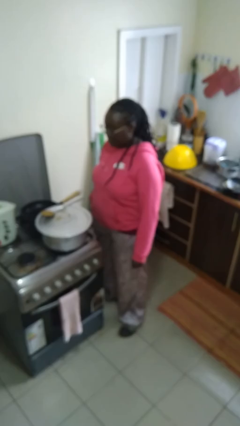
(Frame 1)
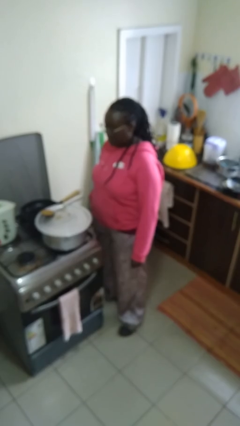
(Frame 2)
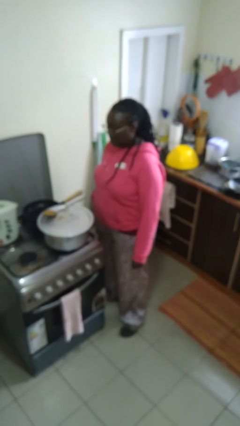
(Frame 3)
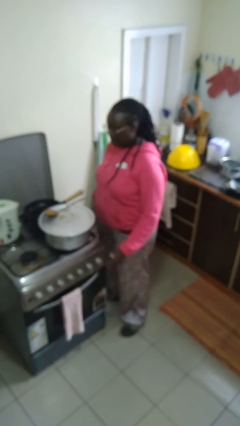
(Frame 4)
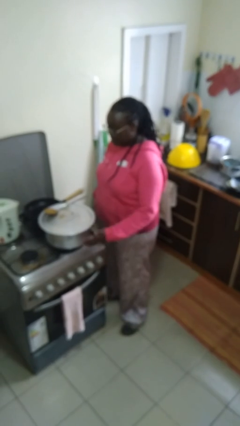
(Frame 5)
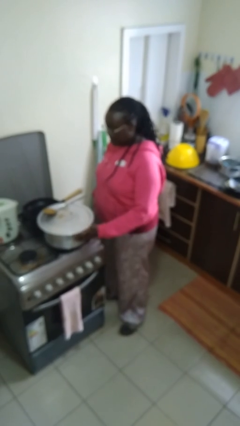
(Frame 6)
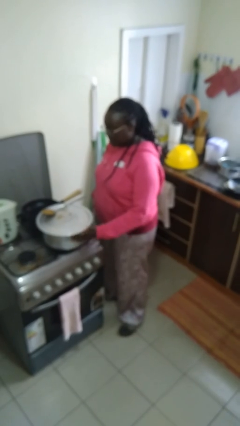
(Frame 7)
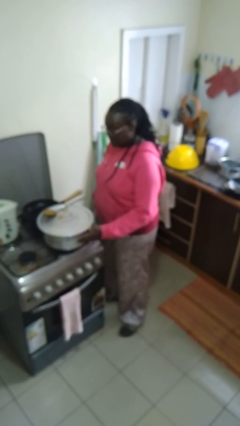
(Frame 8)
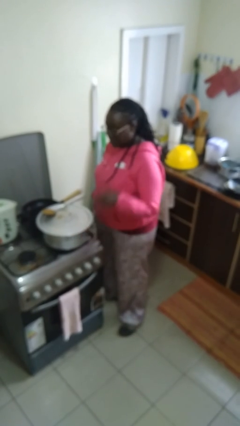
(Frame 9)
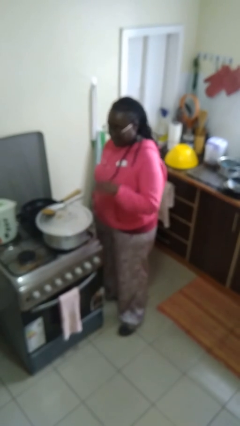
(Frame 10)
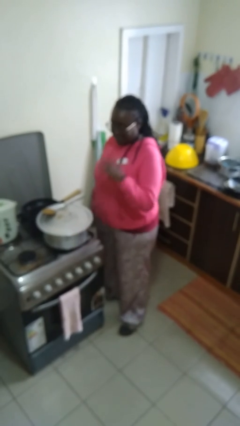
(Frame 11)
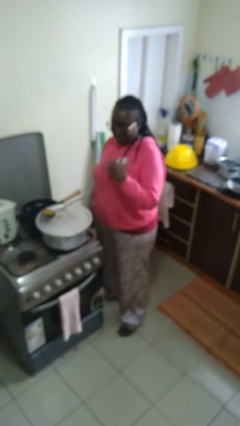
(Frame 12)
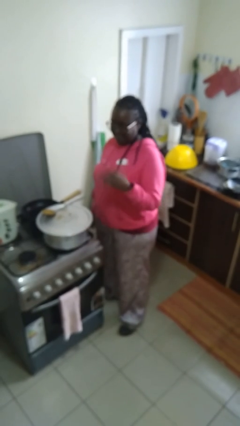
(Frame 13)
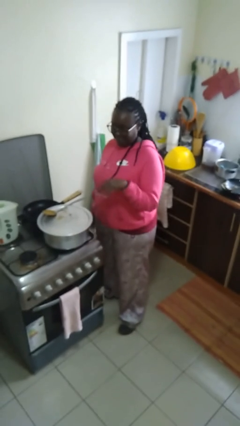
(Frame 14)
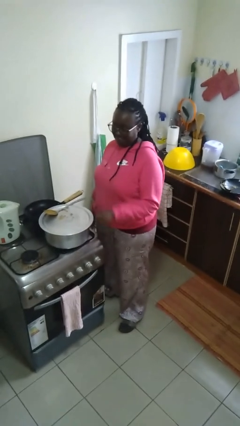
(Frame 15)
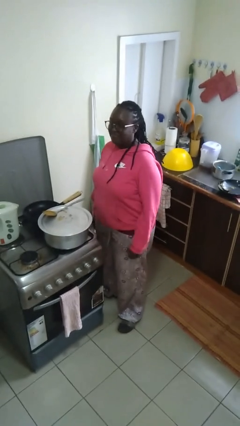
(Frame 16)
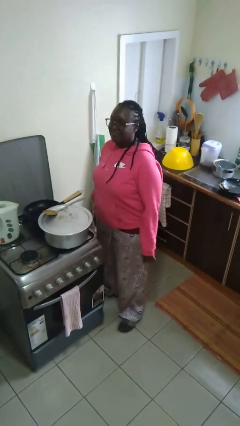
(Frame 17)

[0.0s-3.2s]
person burns hand

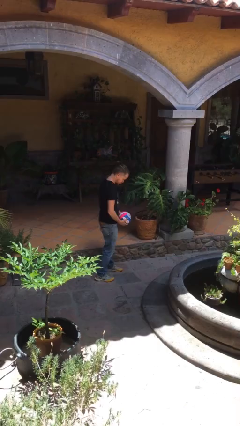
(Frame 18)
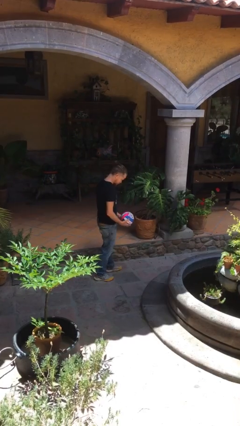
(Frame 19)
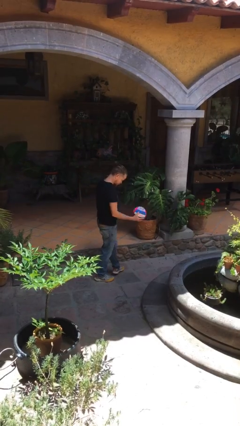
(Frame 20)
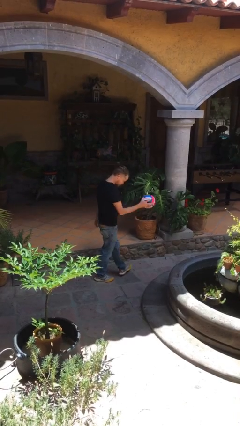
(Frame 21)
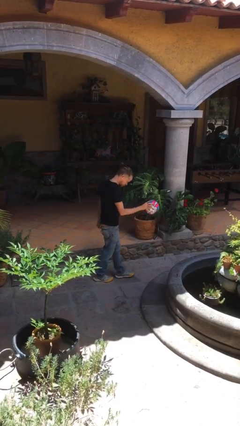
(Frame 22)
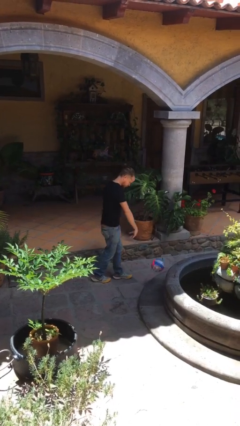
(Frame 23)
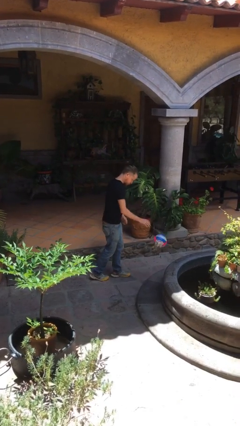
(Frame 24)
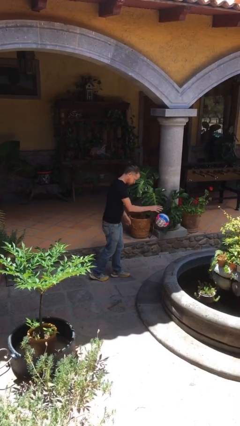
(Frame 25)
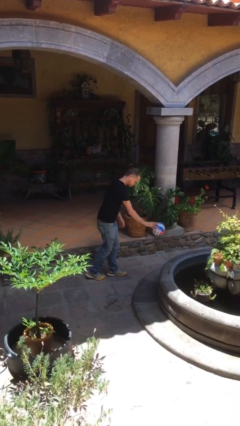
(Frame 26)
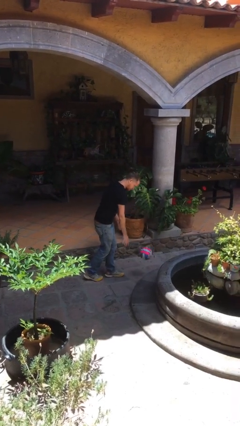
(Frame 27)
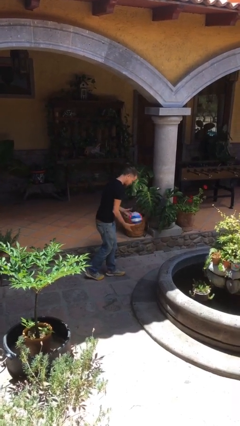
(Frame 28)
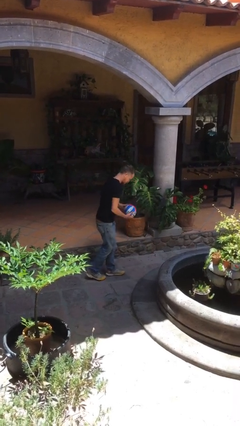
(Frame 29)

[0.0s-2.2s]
person bounces ball on floor

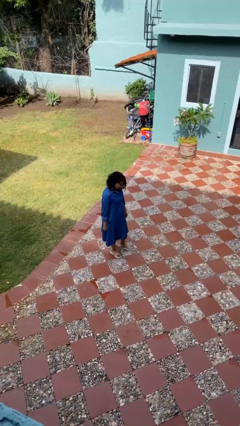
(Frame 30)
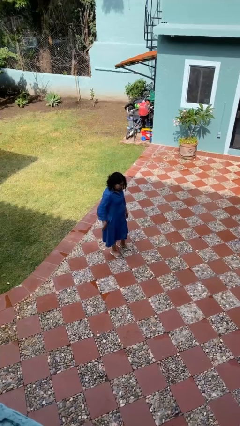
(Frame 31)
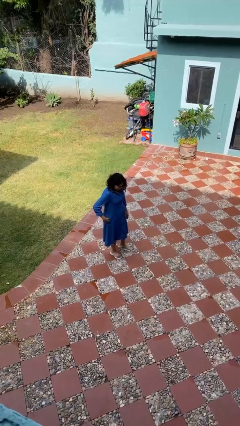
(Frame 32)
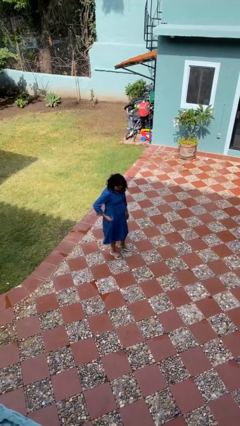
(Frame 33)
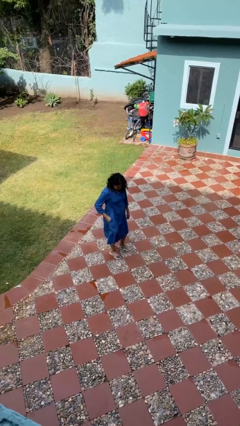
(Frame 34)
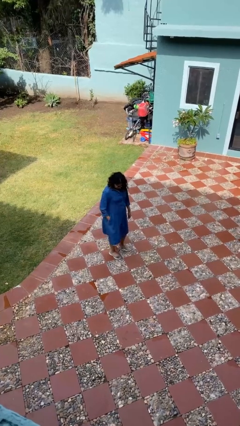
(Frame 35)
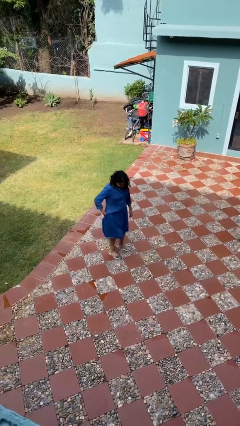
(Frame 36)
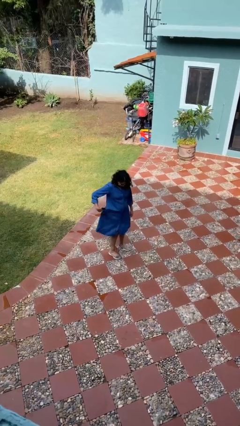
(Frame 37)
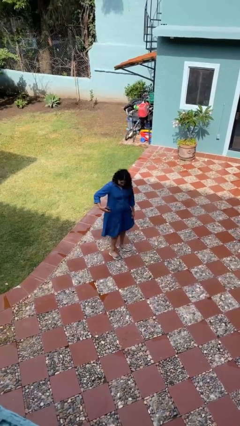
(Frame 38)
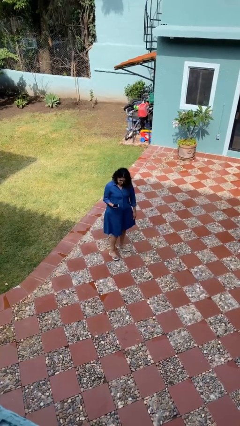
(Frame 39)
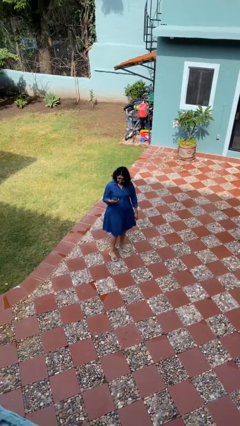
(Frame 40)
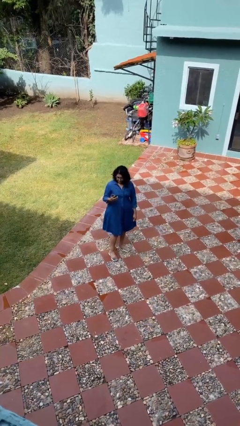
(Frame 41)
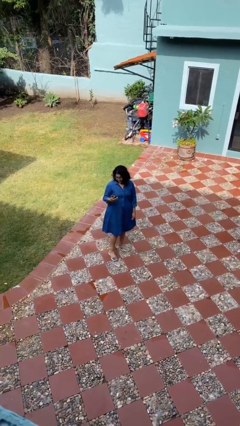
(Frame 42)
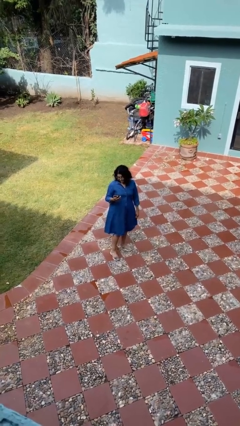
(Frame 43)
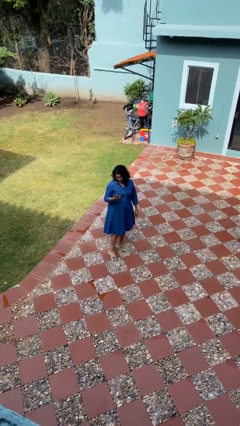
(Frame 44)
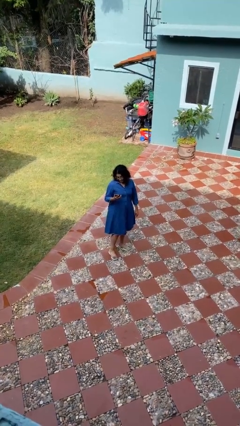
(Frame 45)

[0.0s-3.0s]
person takes phone from pocket

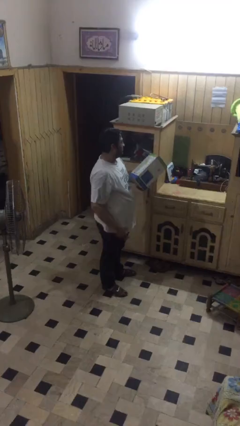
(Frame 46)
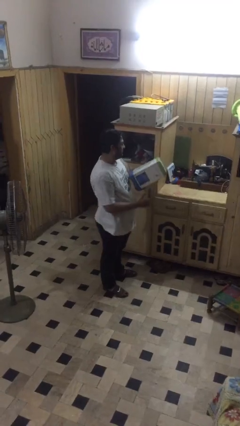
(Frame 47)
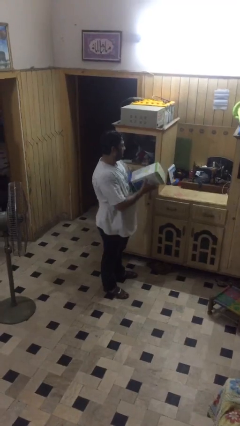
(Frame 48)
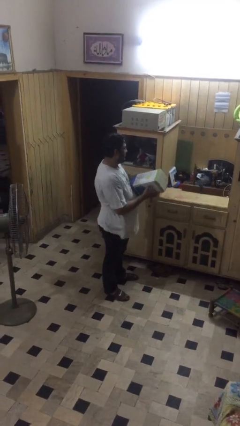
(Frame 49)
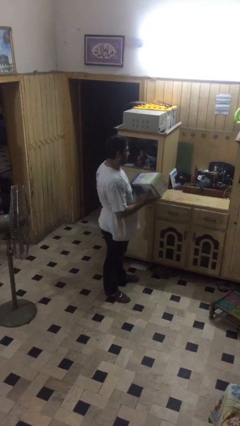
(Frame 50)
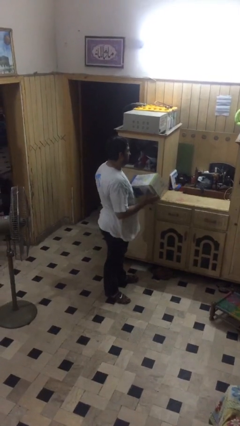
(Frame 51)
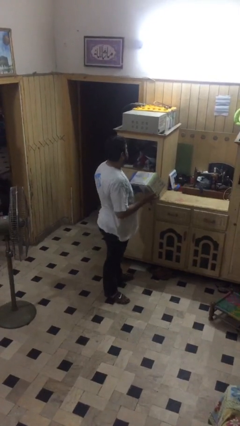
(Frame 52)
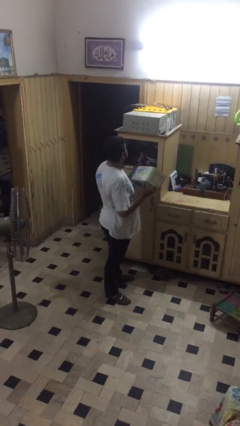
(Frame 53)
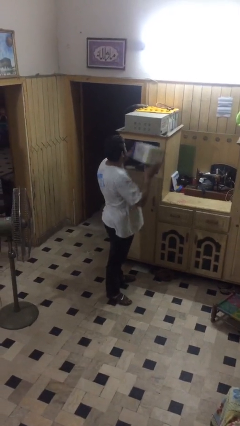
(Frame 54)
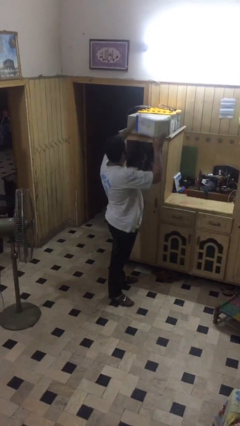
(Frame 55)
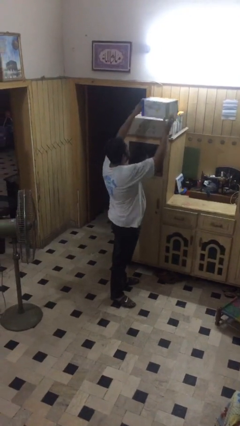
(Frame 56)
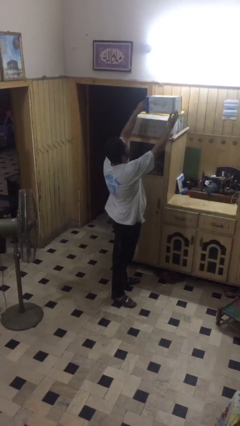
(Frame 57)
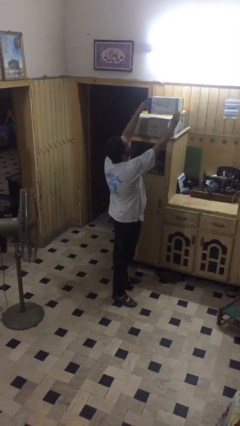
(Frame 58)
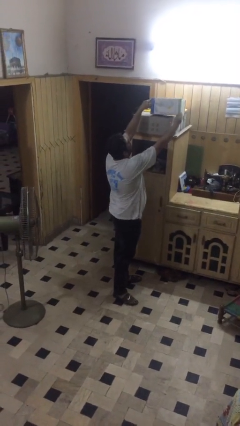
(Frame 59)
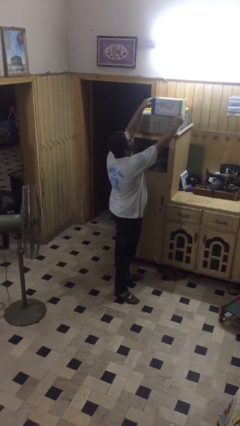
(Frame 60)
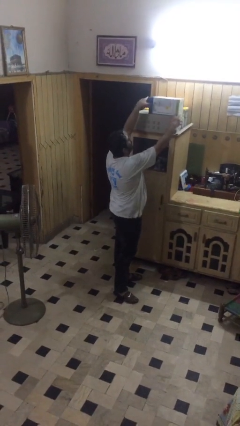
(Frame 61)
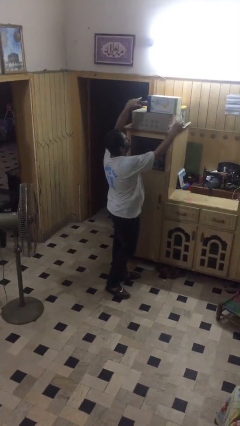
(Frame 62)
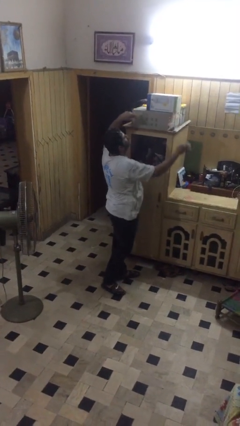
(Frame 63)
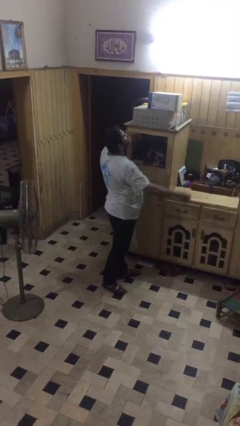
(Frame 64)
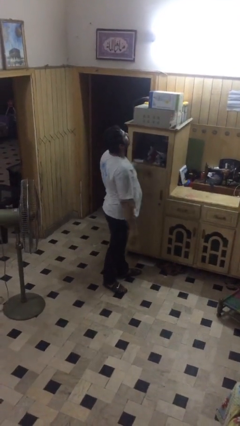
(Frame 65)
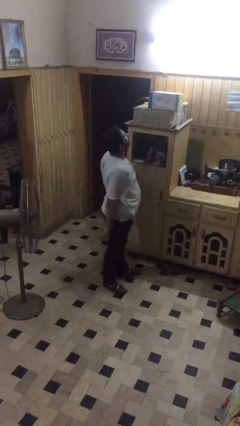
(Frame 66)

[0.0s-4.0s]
person puts down object on shelf

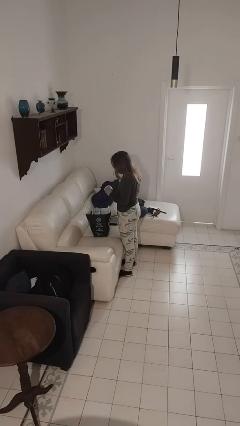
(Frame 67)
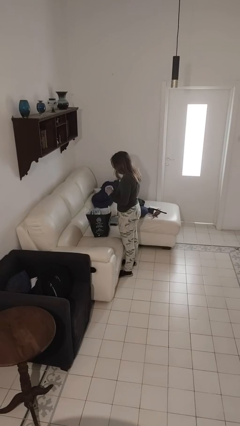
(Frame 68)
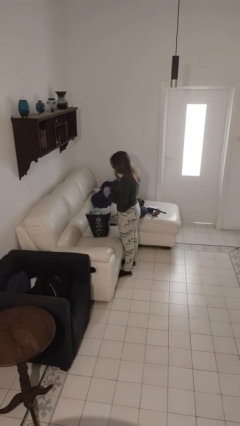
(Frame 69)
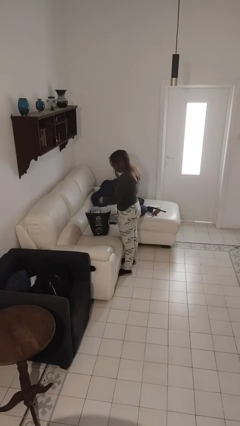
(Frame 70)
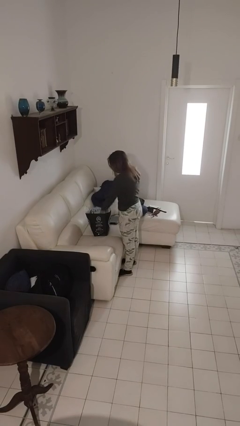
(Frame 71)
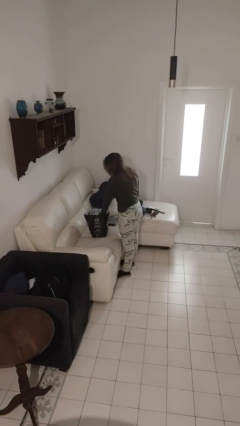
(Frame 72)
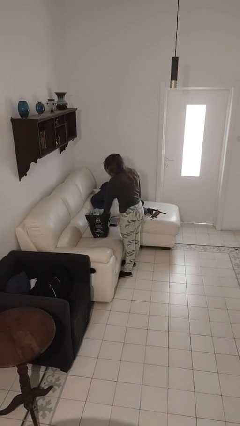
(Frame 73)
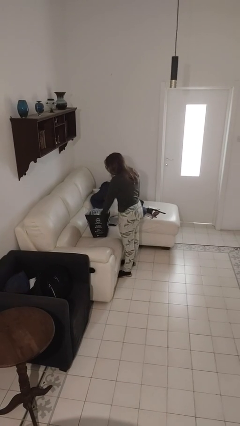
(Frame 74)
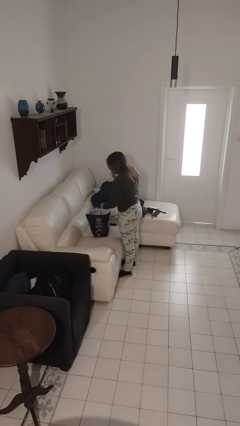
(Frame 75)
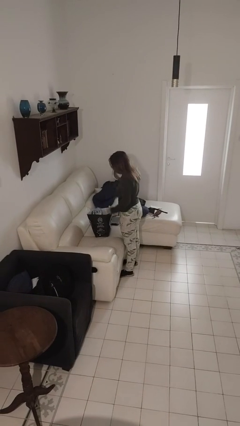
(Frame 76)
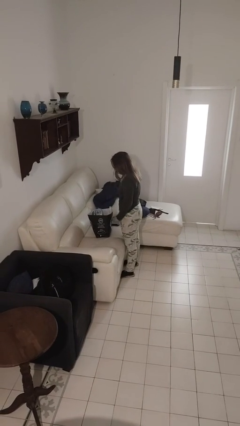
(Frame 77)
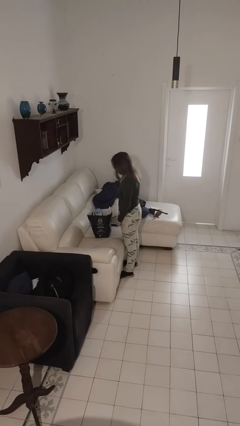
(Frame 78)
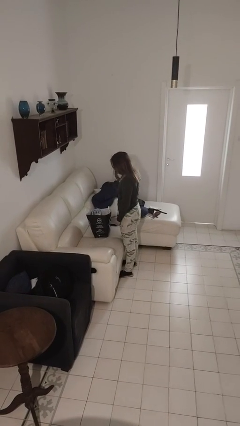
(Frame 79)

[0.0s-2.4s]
person puts object into bag

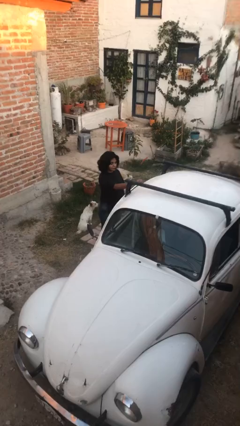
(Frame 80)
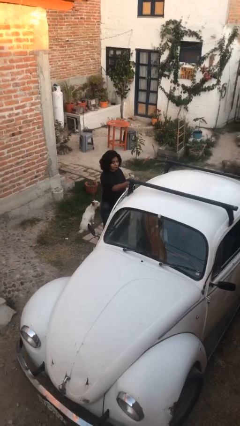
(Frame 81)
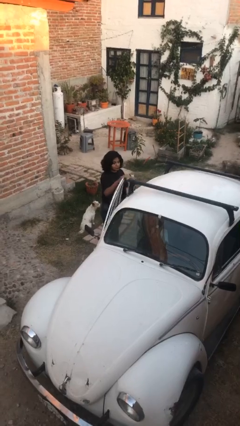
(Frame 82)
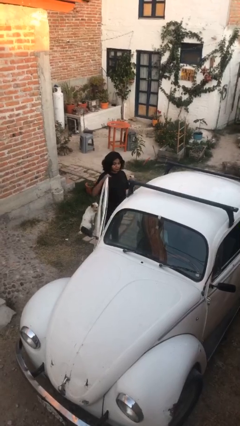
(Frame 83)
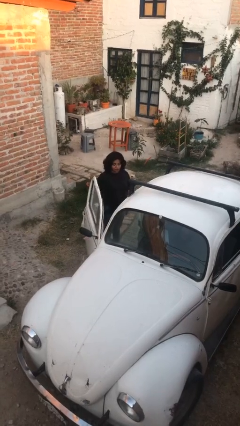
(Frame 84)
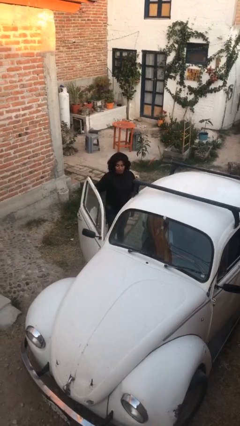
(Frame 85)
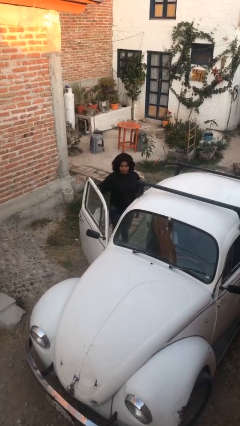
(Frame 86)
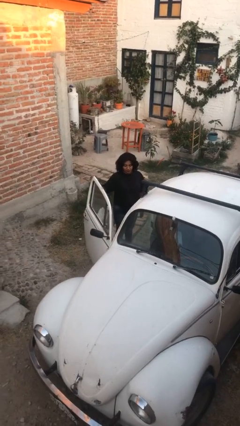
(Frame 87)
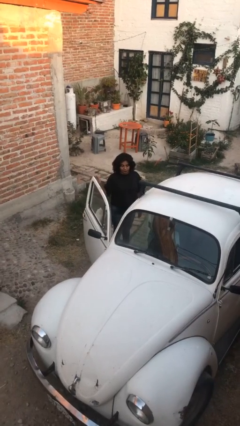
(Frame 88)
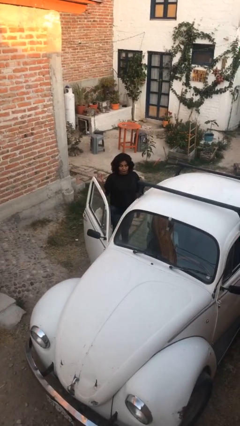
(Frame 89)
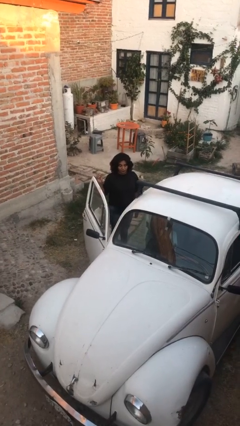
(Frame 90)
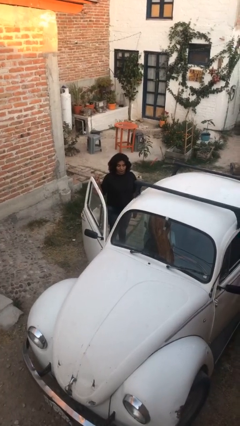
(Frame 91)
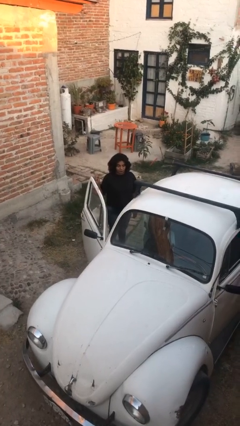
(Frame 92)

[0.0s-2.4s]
person opens car door

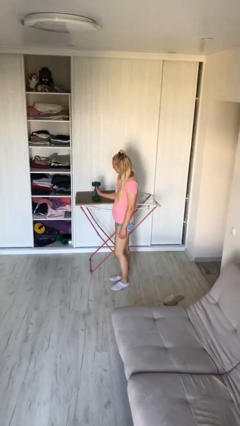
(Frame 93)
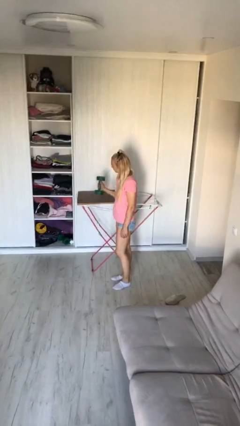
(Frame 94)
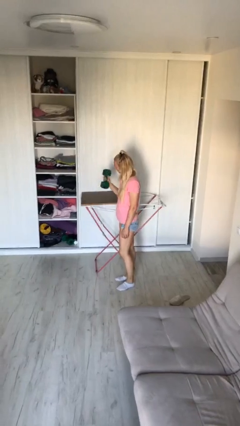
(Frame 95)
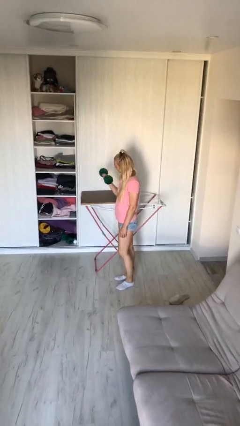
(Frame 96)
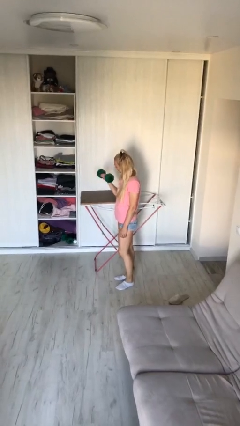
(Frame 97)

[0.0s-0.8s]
person picks up object from table
